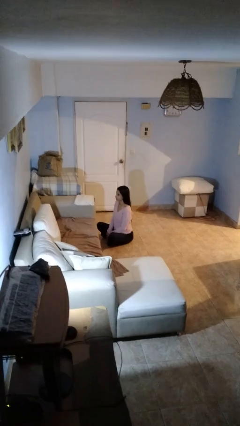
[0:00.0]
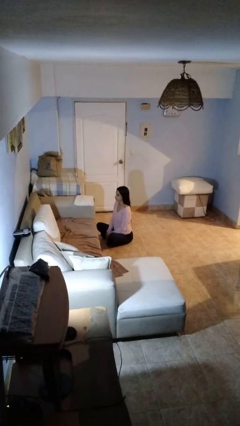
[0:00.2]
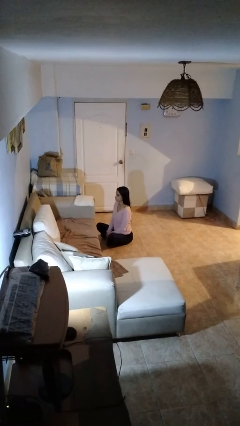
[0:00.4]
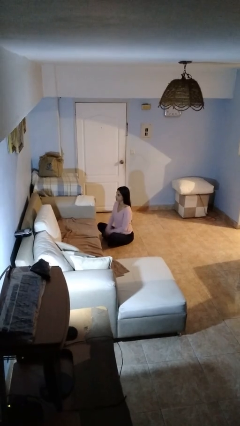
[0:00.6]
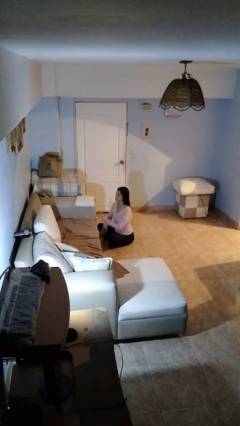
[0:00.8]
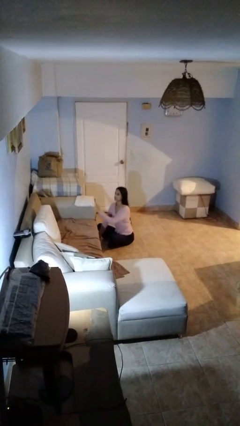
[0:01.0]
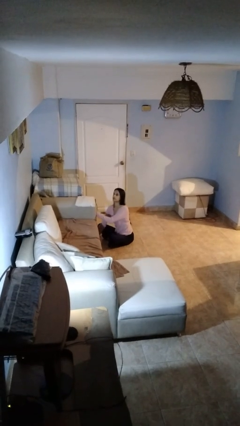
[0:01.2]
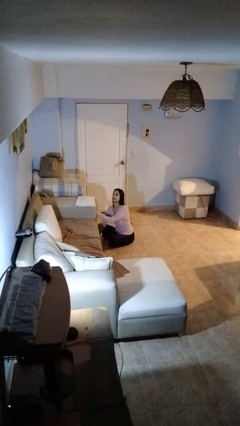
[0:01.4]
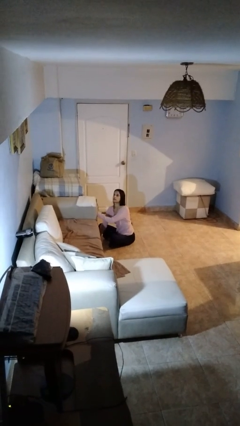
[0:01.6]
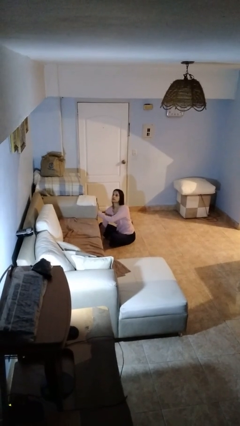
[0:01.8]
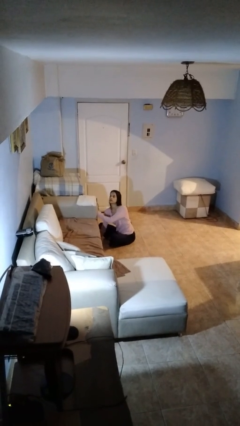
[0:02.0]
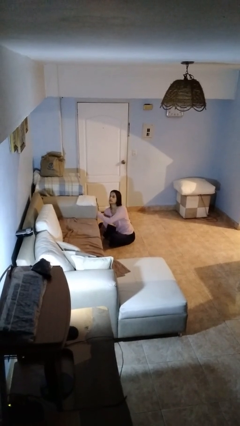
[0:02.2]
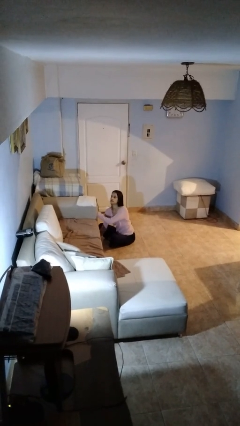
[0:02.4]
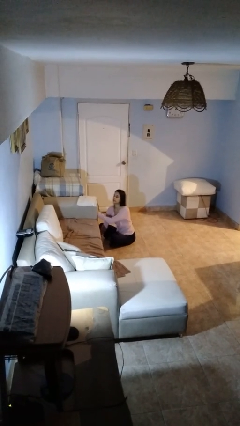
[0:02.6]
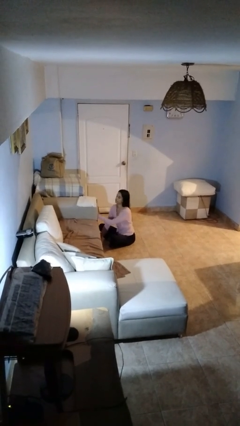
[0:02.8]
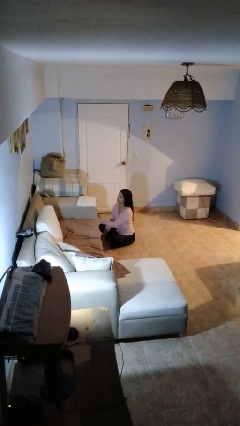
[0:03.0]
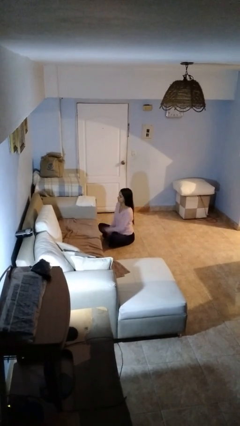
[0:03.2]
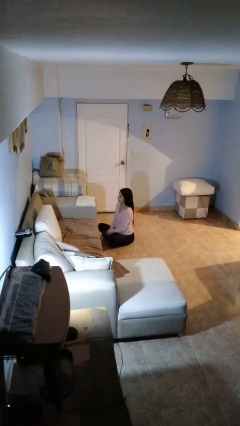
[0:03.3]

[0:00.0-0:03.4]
person searches under couch

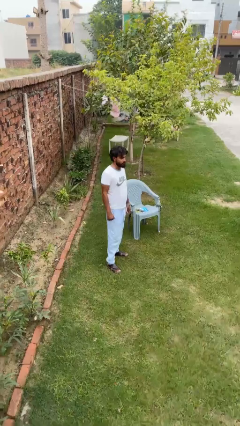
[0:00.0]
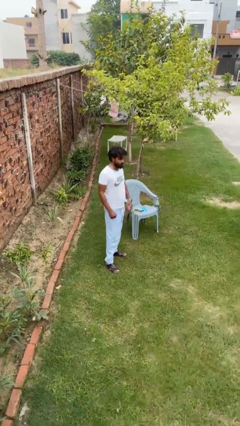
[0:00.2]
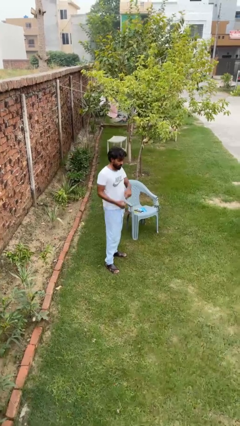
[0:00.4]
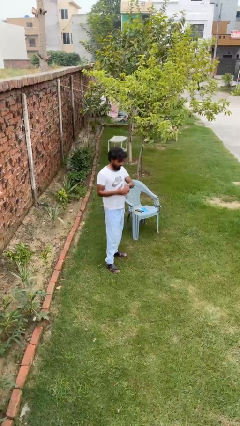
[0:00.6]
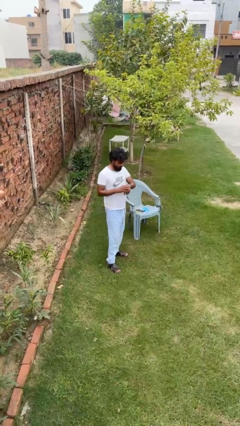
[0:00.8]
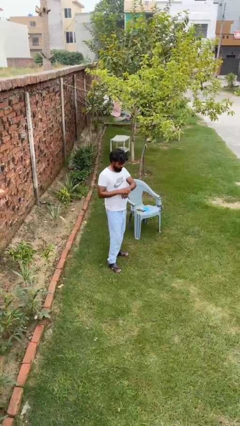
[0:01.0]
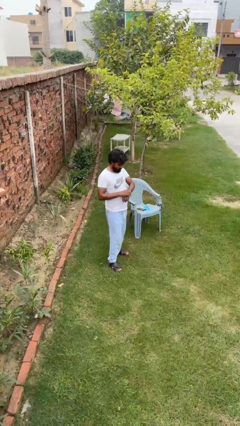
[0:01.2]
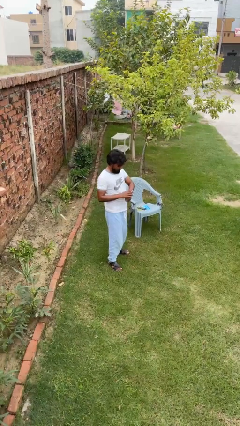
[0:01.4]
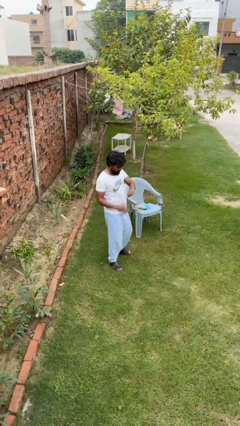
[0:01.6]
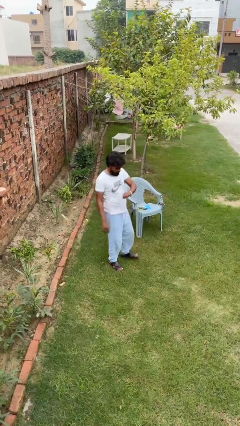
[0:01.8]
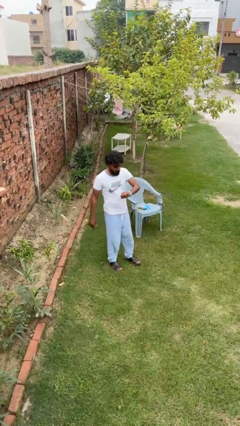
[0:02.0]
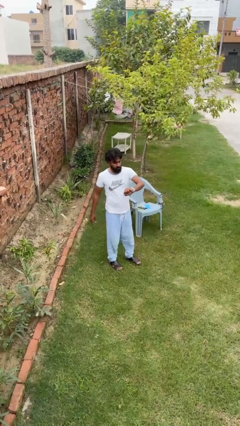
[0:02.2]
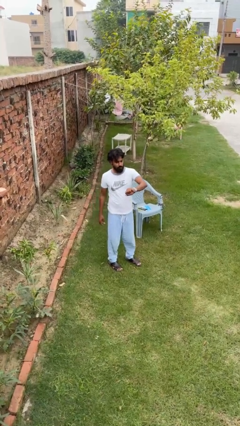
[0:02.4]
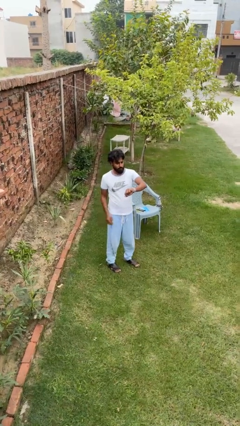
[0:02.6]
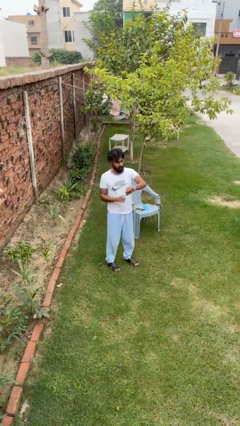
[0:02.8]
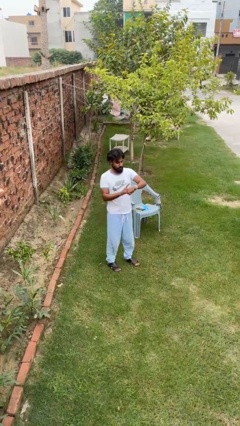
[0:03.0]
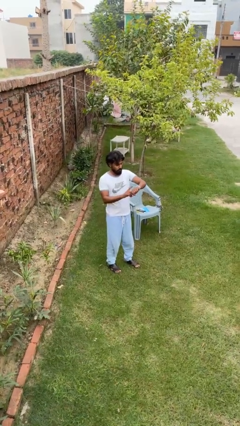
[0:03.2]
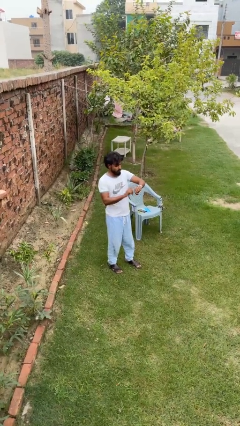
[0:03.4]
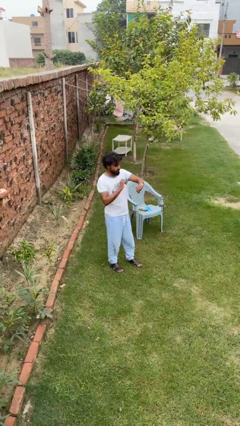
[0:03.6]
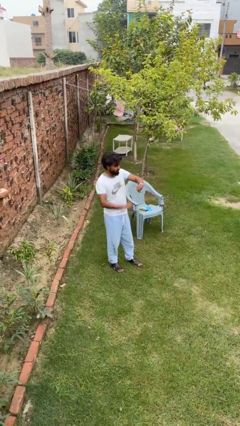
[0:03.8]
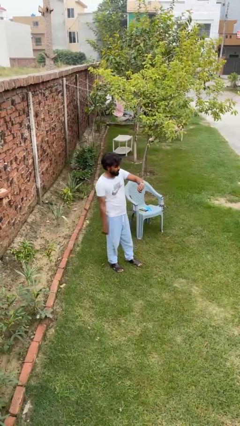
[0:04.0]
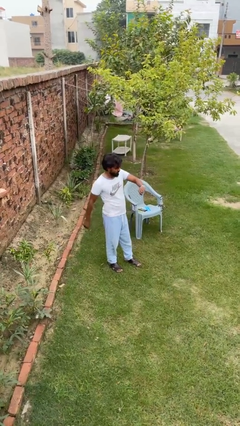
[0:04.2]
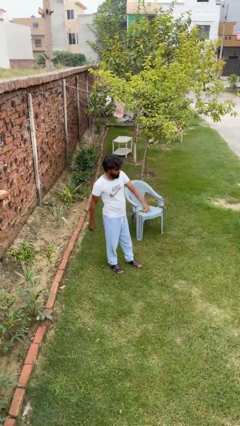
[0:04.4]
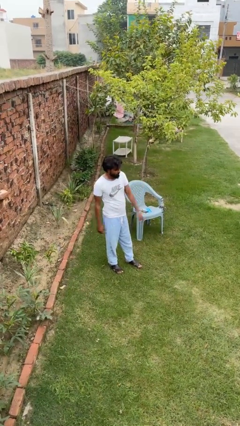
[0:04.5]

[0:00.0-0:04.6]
person looks at wristwatch

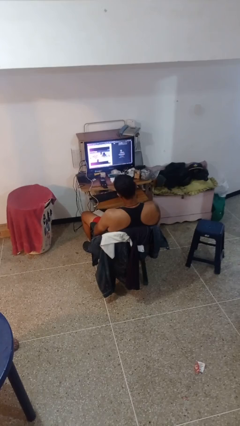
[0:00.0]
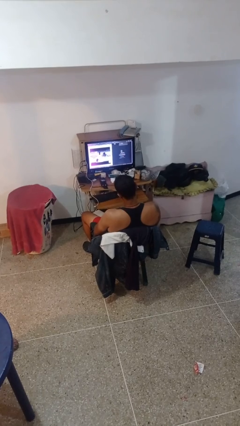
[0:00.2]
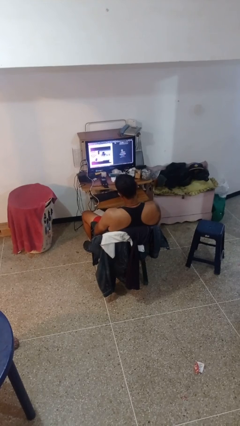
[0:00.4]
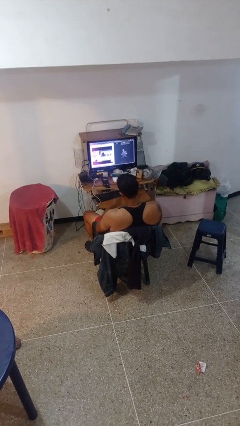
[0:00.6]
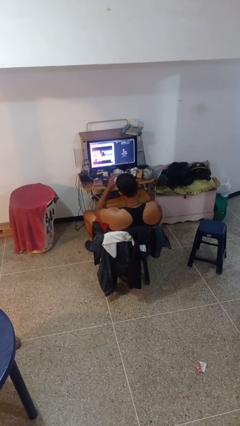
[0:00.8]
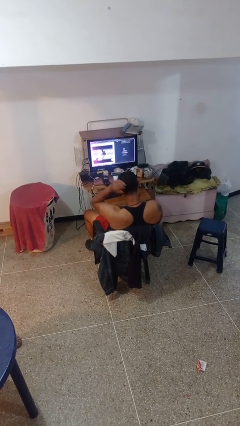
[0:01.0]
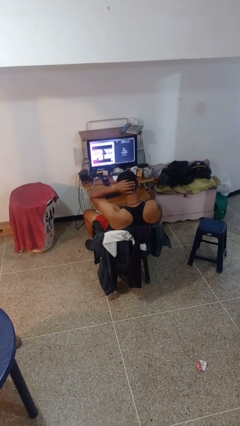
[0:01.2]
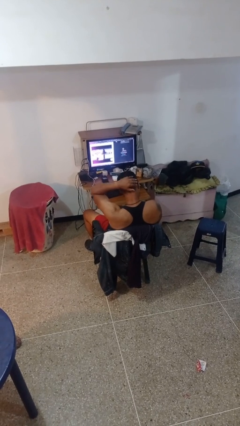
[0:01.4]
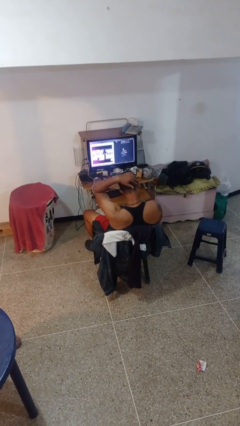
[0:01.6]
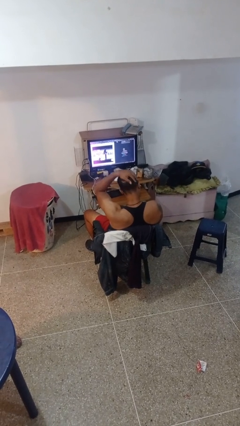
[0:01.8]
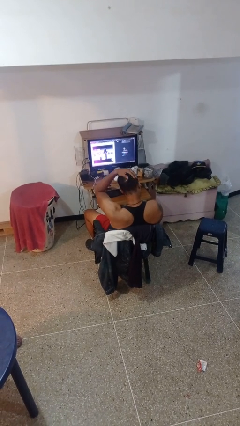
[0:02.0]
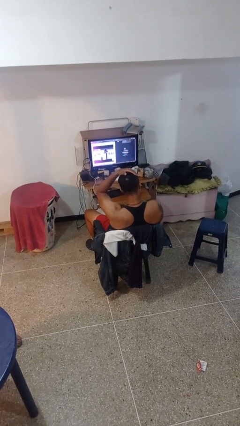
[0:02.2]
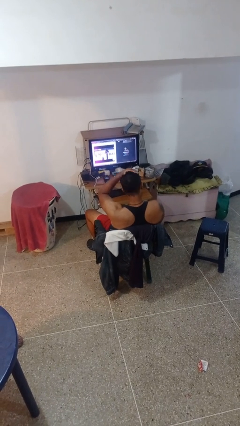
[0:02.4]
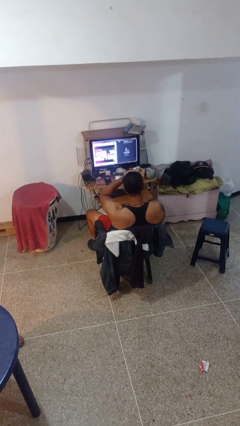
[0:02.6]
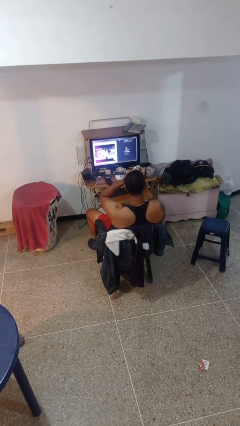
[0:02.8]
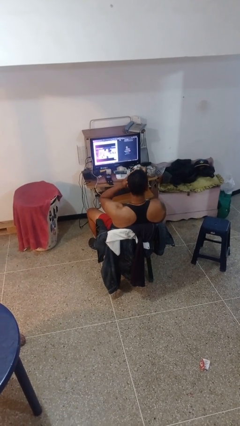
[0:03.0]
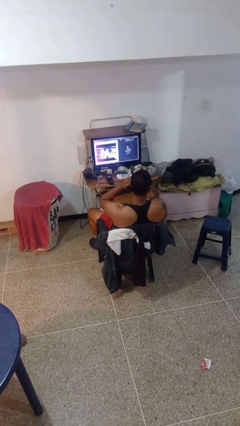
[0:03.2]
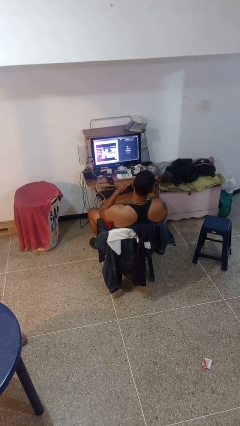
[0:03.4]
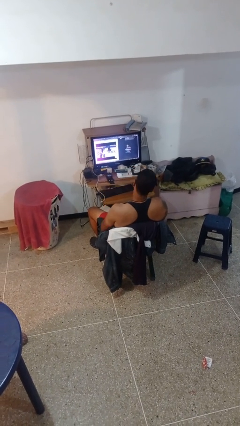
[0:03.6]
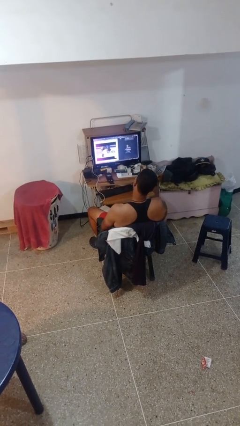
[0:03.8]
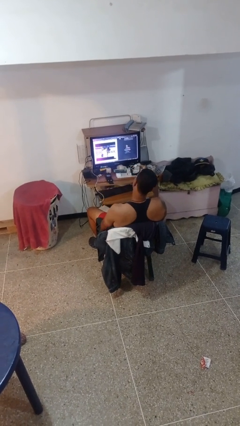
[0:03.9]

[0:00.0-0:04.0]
person pats head

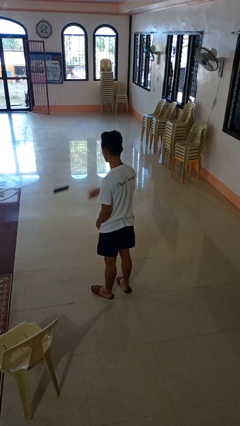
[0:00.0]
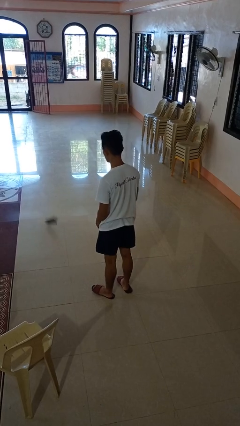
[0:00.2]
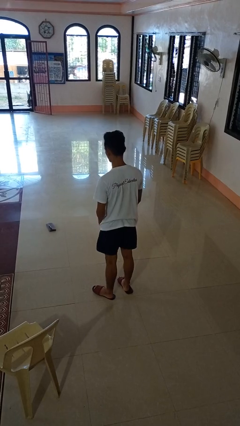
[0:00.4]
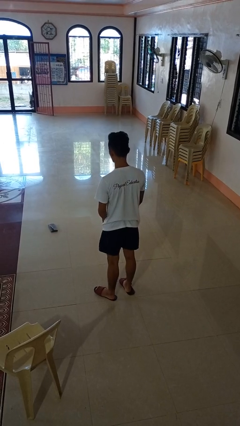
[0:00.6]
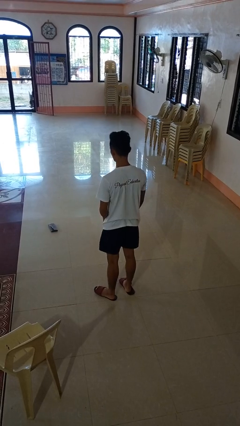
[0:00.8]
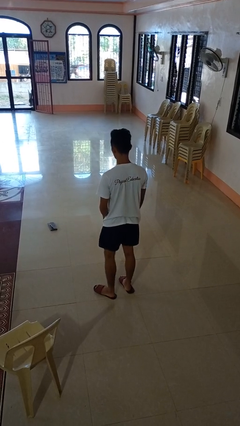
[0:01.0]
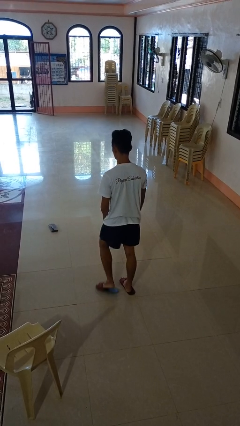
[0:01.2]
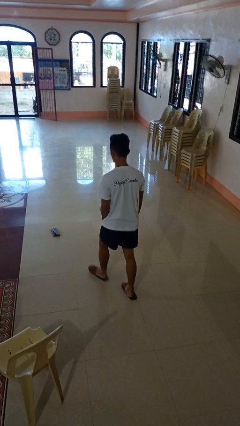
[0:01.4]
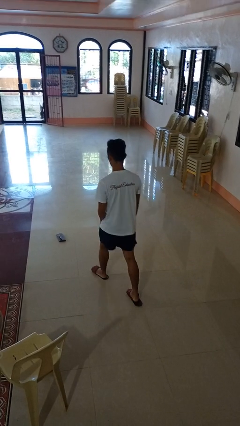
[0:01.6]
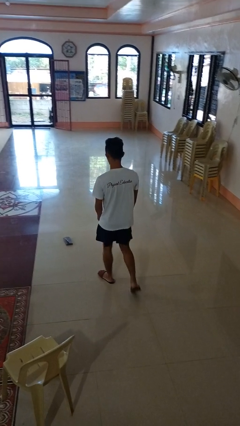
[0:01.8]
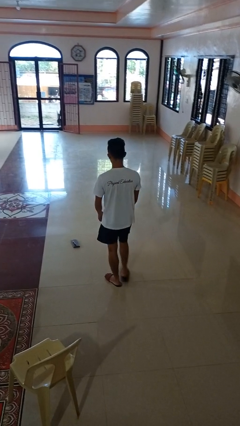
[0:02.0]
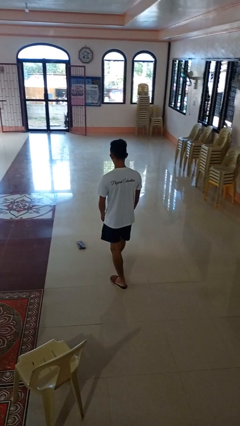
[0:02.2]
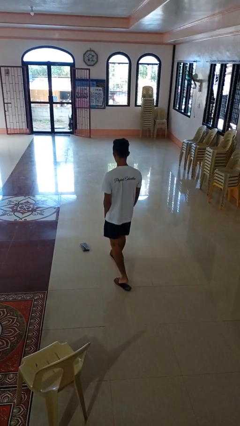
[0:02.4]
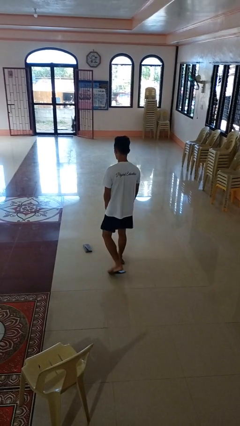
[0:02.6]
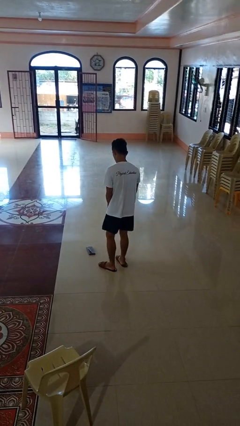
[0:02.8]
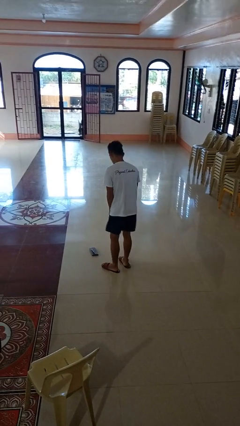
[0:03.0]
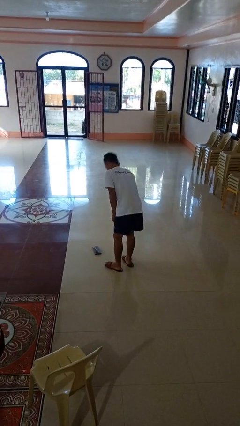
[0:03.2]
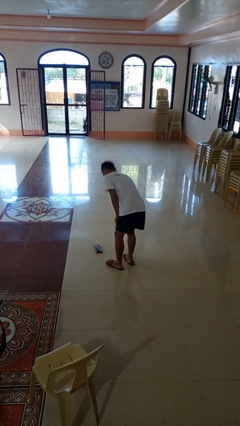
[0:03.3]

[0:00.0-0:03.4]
person throws object to ground

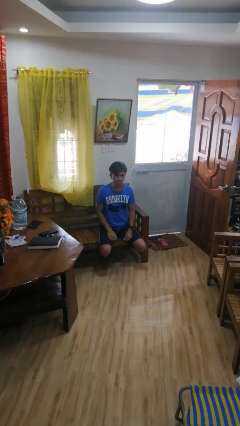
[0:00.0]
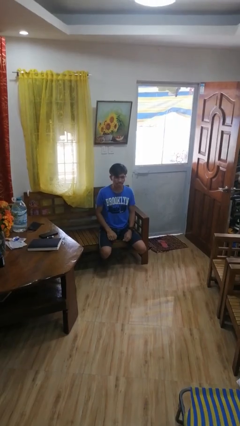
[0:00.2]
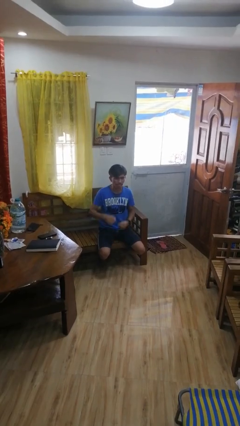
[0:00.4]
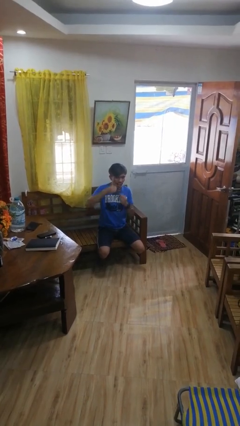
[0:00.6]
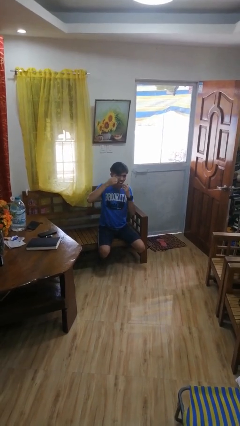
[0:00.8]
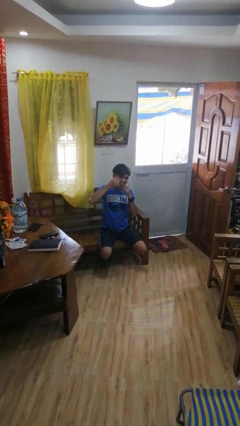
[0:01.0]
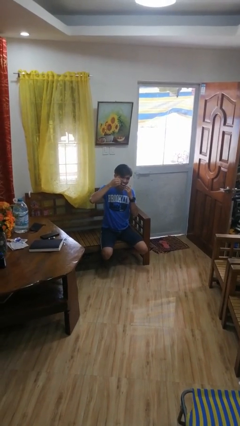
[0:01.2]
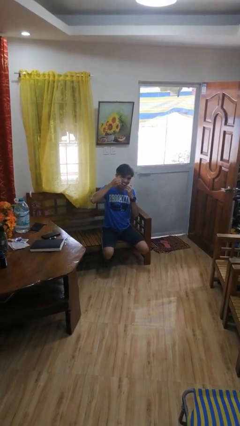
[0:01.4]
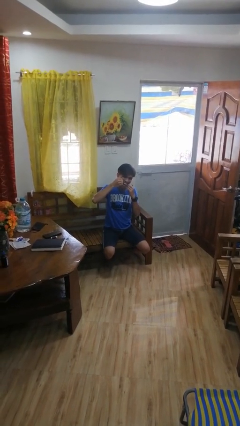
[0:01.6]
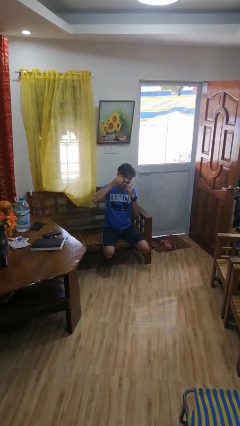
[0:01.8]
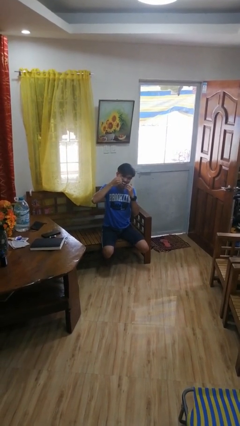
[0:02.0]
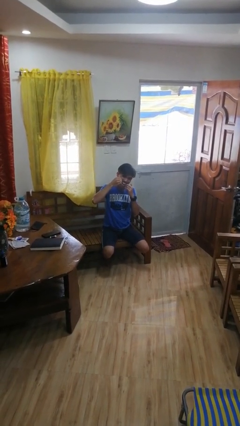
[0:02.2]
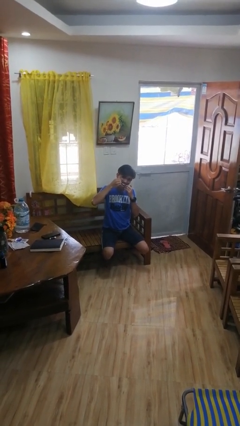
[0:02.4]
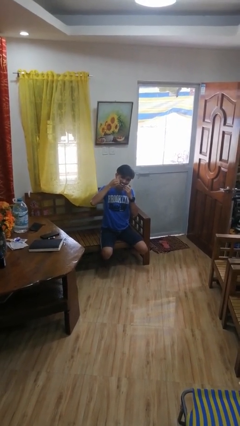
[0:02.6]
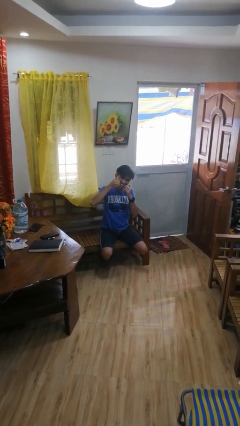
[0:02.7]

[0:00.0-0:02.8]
person flosses
